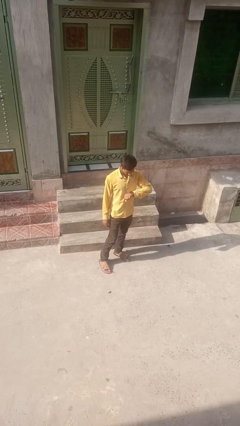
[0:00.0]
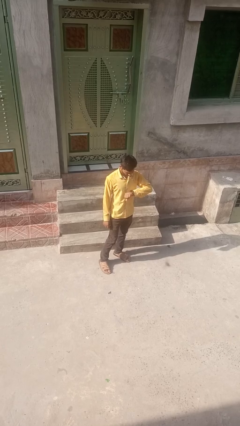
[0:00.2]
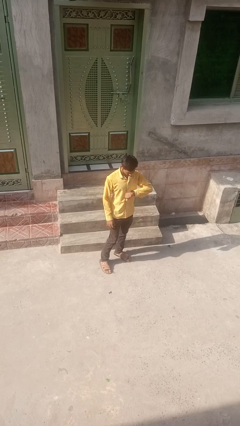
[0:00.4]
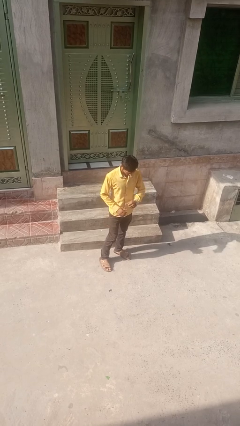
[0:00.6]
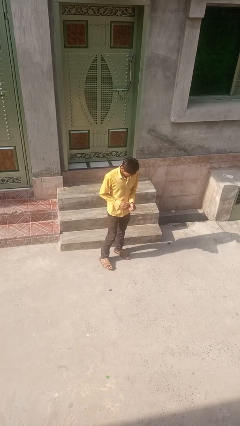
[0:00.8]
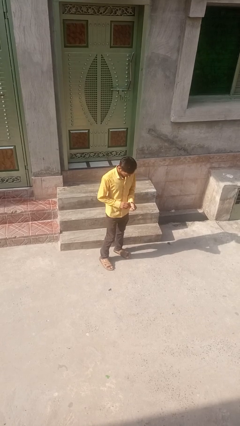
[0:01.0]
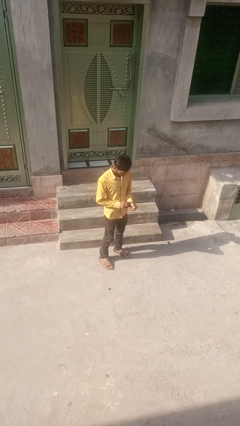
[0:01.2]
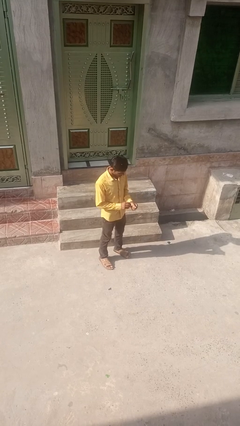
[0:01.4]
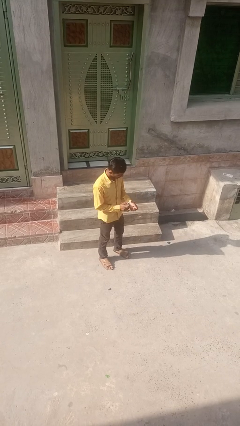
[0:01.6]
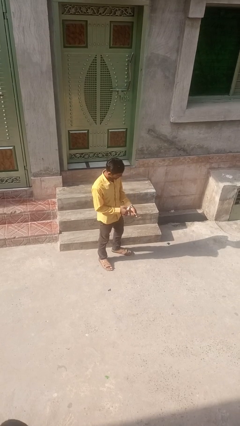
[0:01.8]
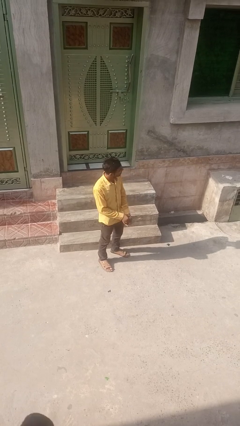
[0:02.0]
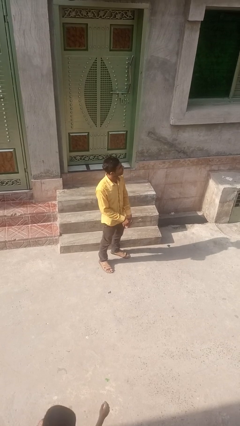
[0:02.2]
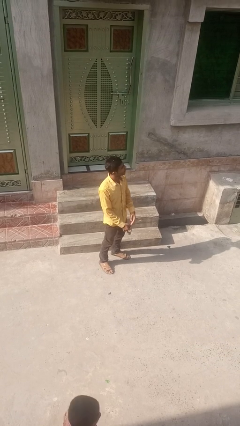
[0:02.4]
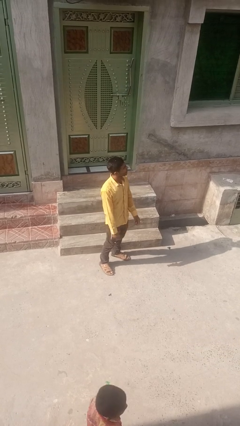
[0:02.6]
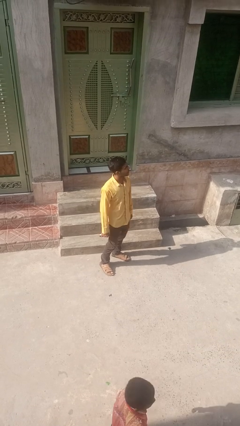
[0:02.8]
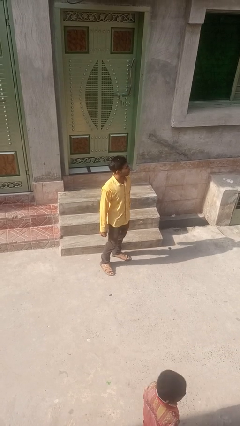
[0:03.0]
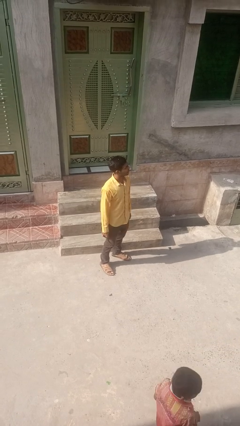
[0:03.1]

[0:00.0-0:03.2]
person takes off wristwatch

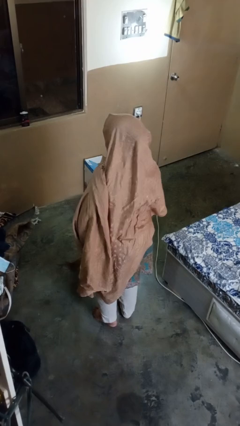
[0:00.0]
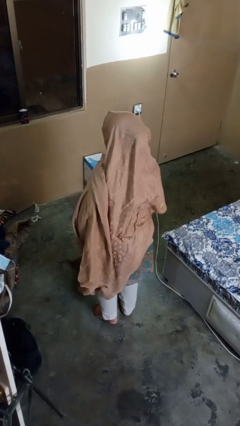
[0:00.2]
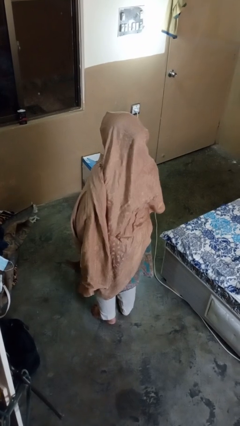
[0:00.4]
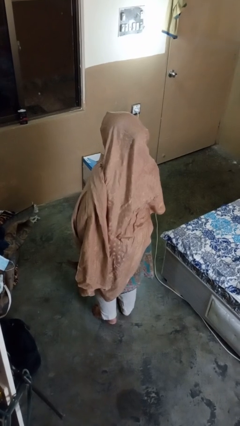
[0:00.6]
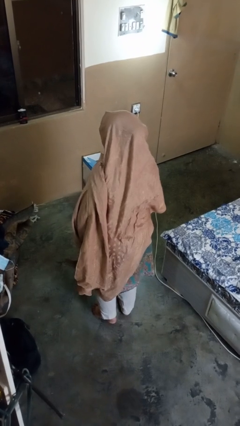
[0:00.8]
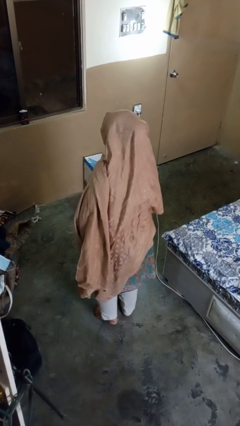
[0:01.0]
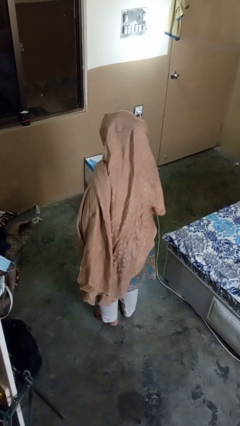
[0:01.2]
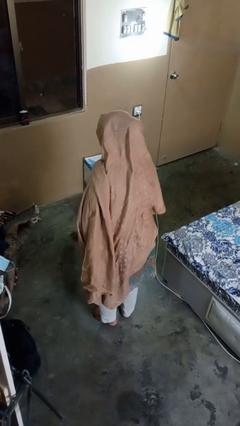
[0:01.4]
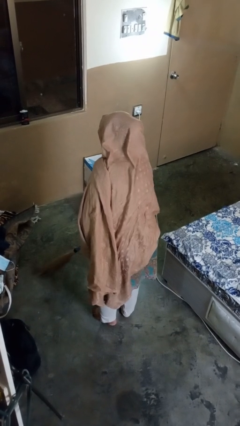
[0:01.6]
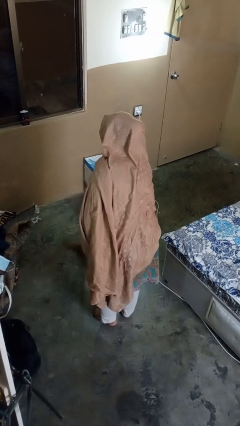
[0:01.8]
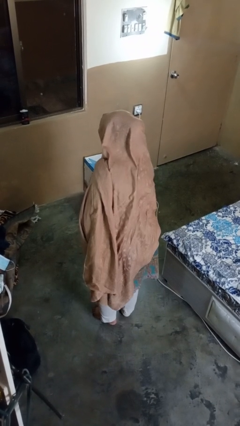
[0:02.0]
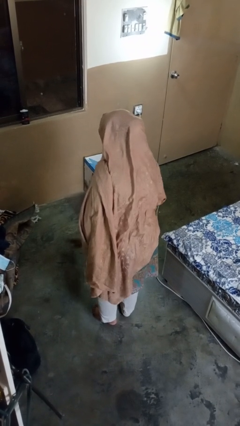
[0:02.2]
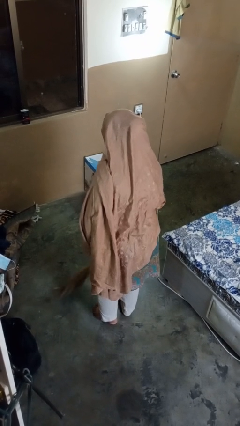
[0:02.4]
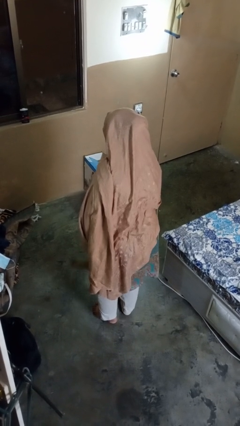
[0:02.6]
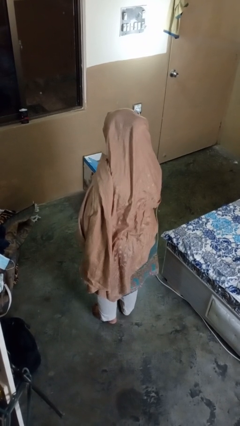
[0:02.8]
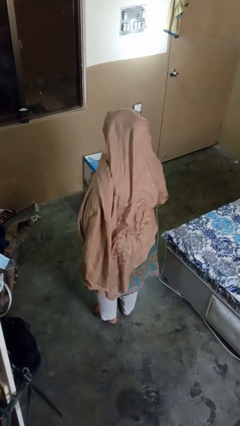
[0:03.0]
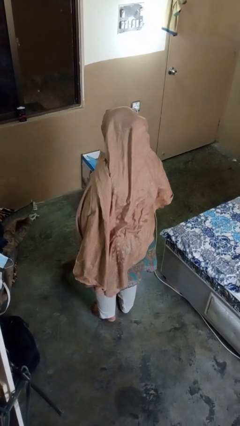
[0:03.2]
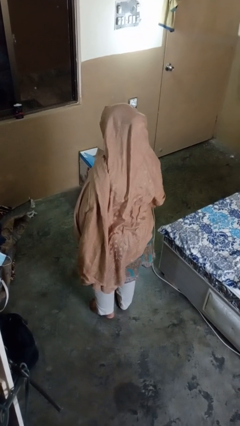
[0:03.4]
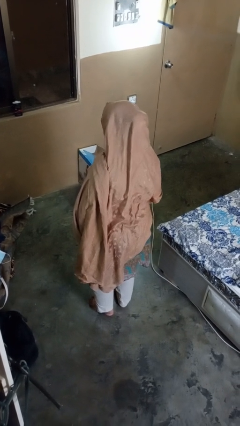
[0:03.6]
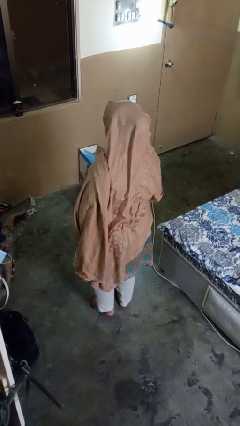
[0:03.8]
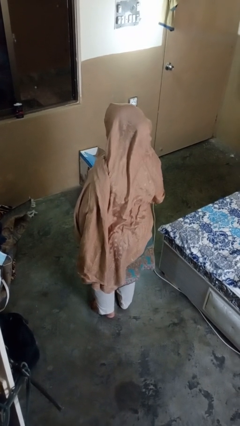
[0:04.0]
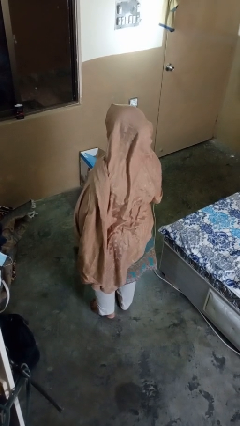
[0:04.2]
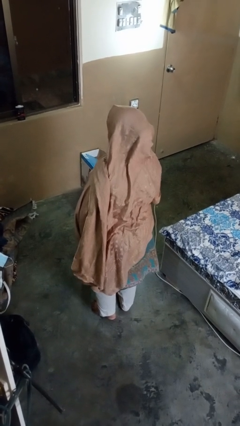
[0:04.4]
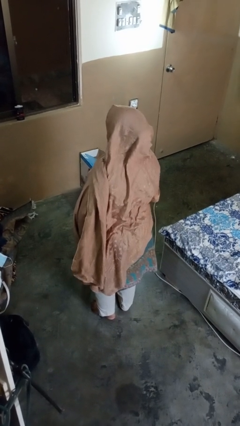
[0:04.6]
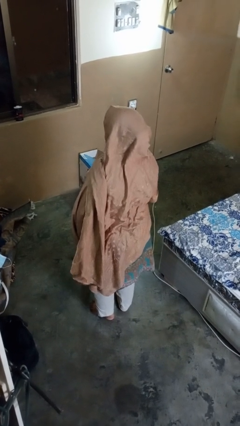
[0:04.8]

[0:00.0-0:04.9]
person sweeps floor

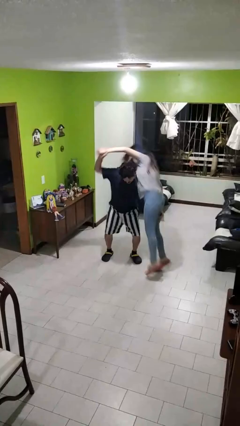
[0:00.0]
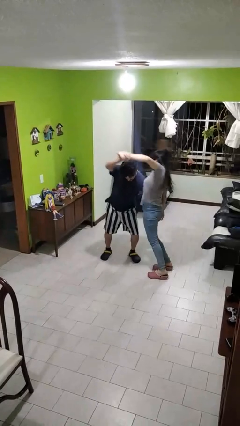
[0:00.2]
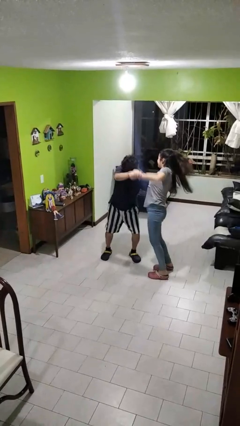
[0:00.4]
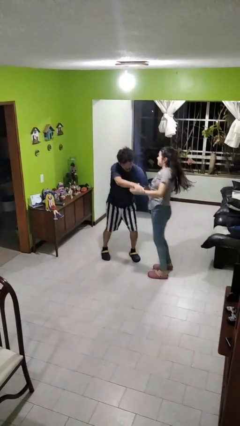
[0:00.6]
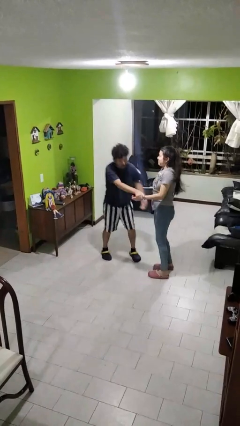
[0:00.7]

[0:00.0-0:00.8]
person puts down person

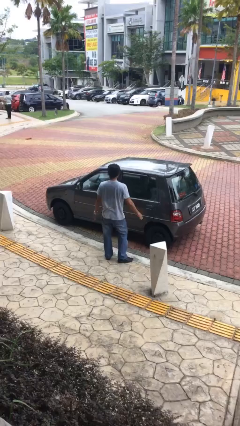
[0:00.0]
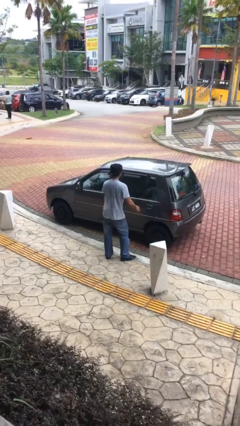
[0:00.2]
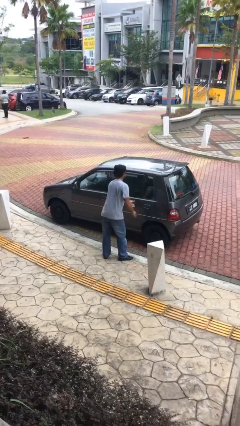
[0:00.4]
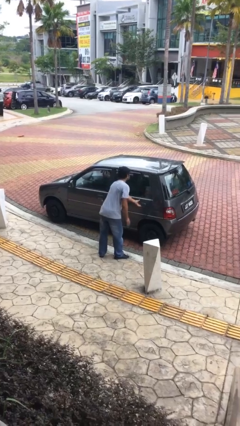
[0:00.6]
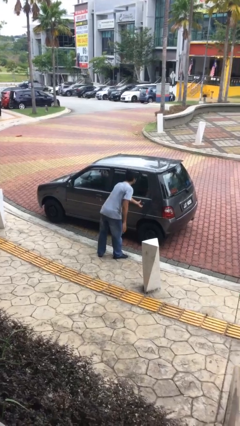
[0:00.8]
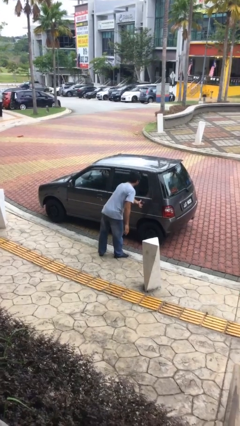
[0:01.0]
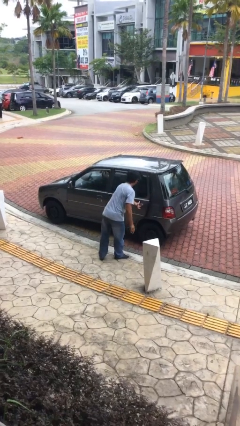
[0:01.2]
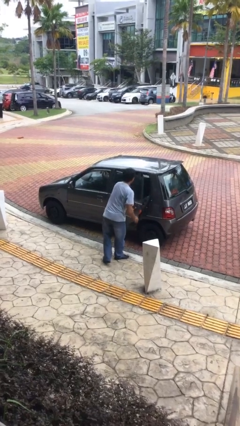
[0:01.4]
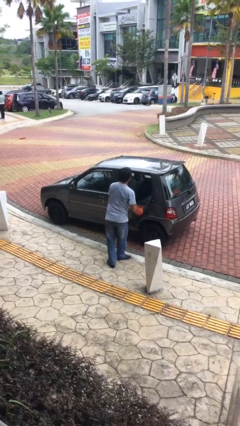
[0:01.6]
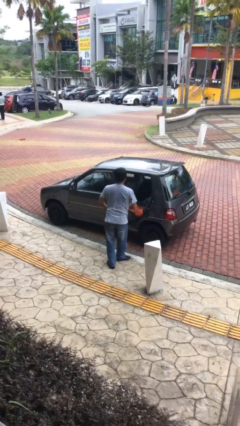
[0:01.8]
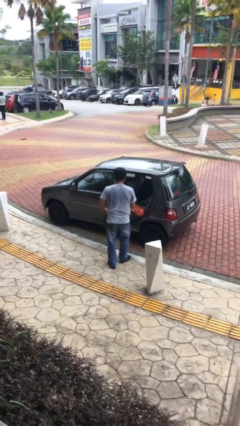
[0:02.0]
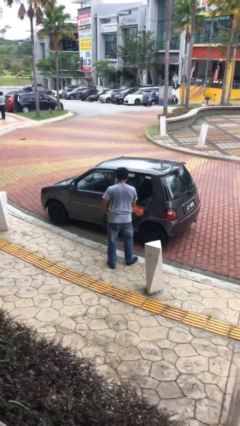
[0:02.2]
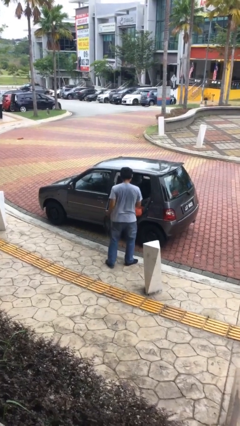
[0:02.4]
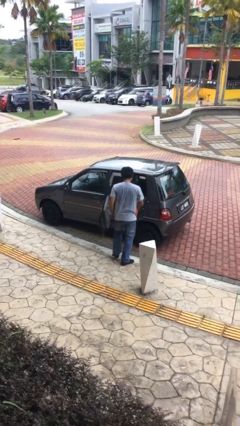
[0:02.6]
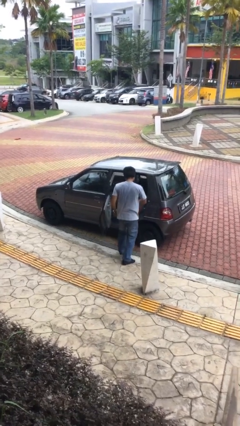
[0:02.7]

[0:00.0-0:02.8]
person opens car door

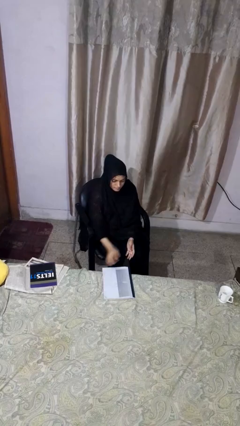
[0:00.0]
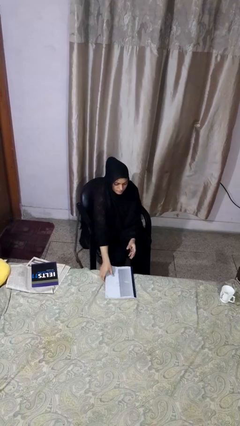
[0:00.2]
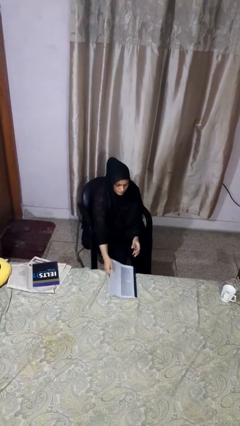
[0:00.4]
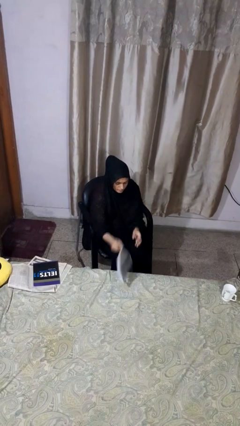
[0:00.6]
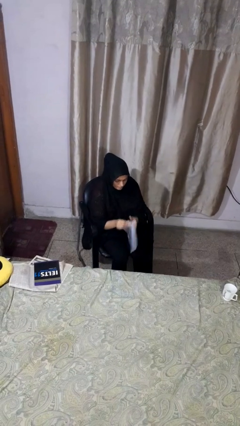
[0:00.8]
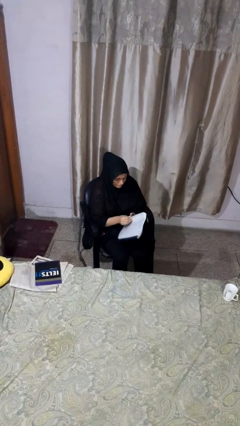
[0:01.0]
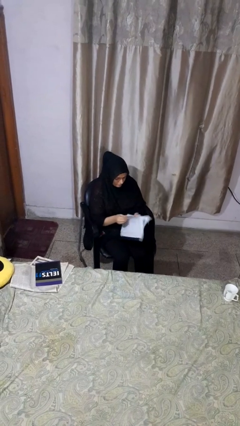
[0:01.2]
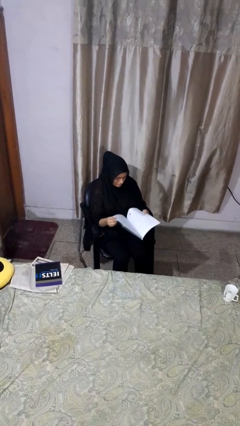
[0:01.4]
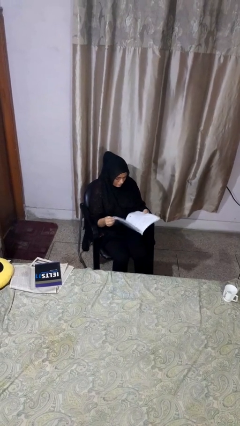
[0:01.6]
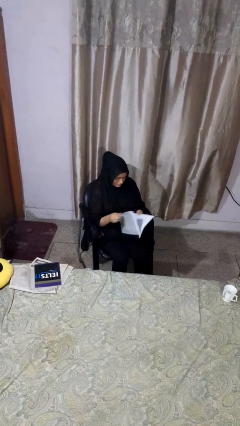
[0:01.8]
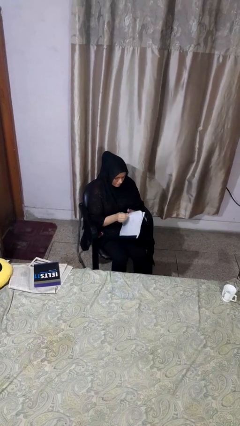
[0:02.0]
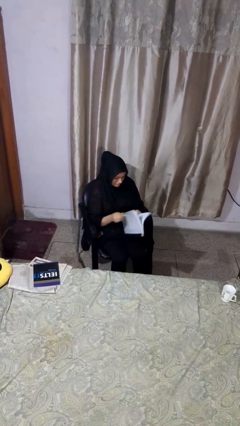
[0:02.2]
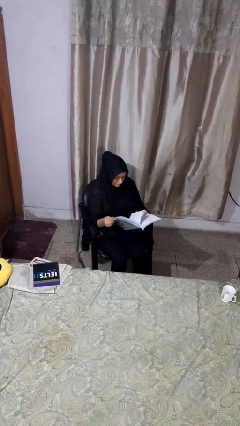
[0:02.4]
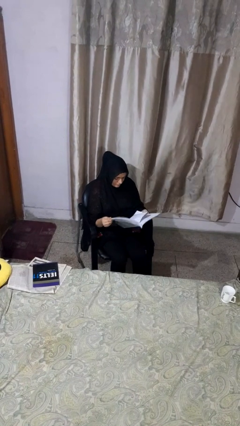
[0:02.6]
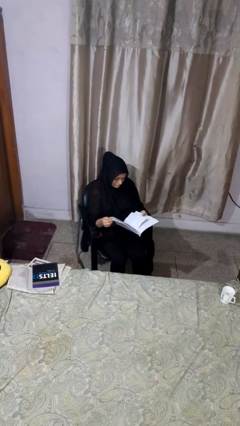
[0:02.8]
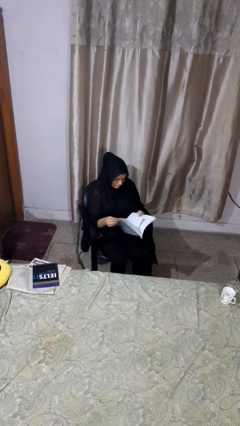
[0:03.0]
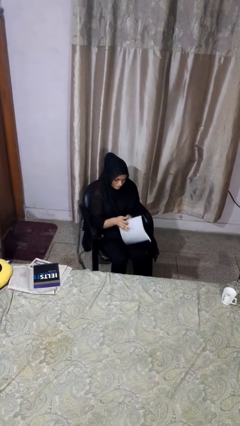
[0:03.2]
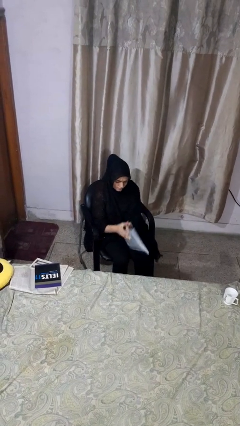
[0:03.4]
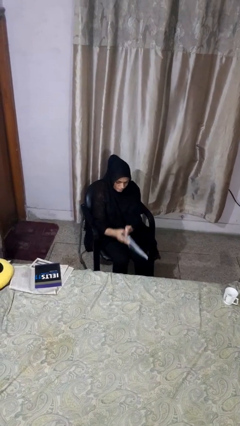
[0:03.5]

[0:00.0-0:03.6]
person reads magazine

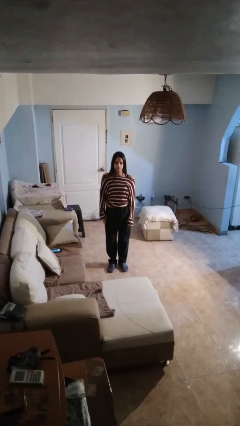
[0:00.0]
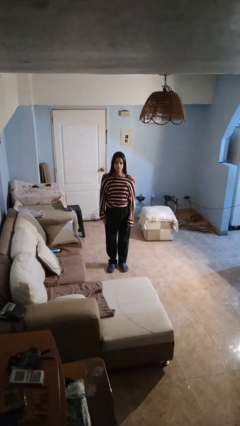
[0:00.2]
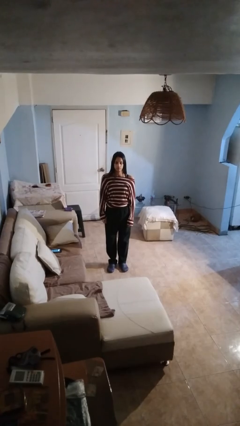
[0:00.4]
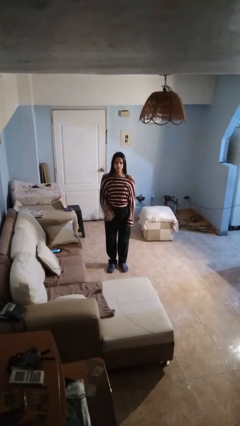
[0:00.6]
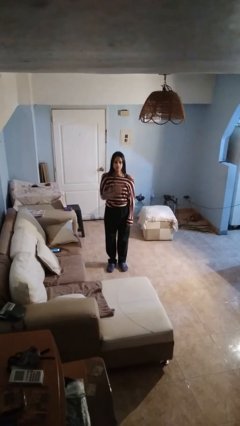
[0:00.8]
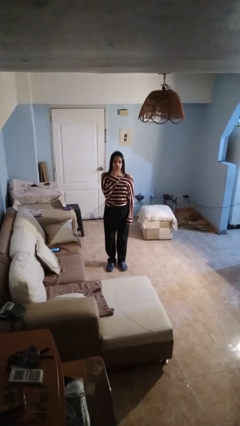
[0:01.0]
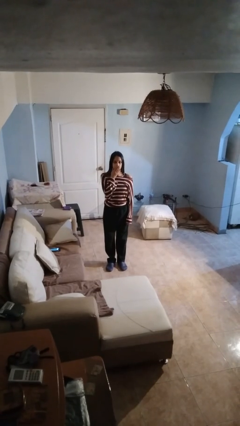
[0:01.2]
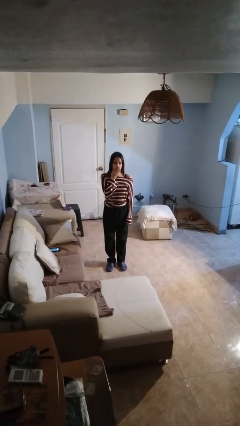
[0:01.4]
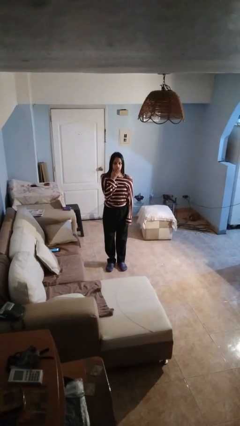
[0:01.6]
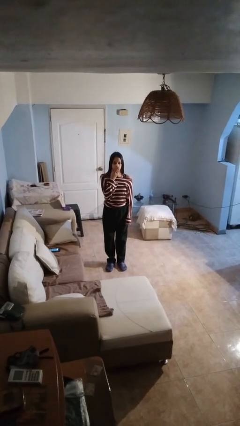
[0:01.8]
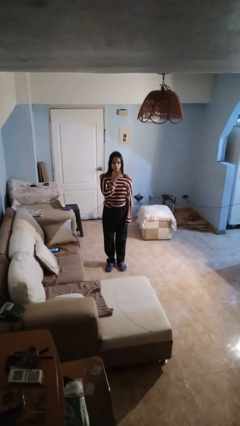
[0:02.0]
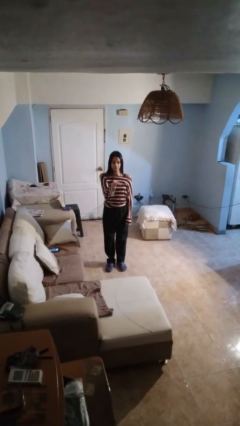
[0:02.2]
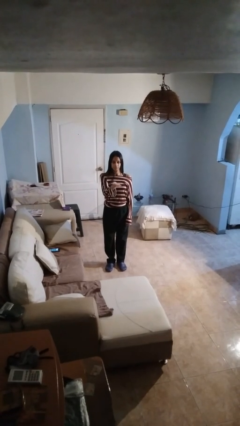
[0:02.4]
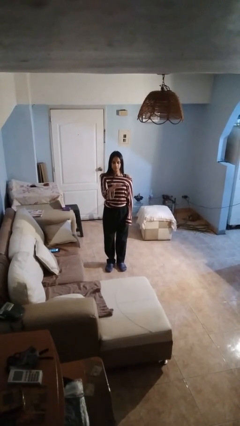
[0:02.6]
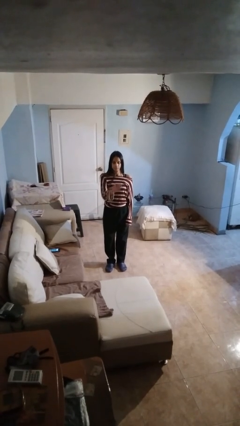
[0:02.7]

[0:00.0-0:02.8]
person gestures blow kiss
